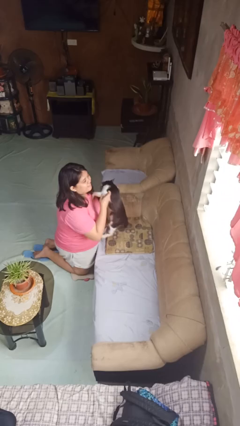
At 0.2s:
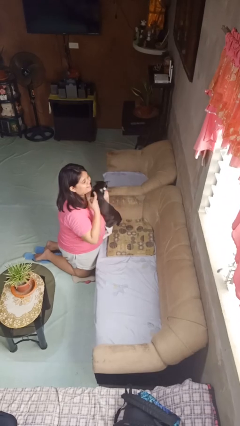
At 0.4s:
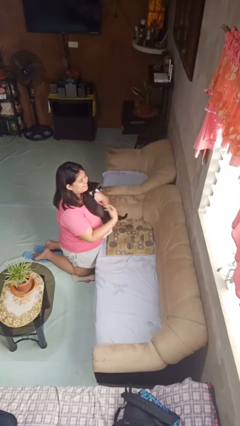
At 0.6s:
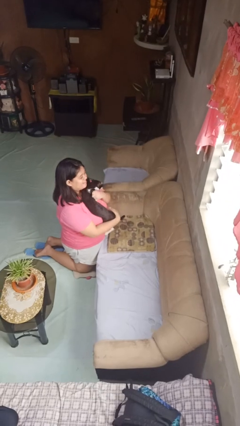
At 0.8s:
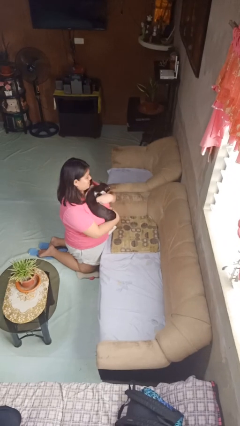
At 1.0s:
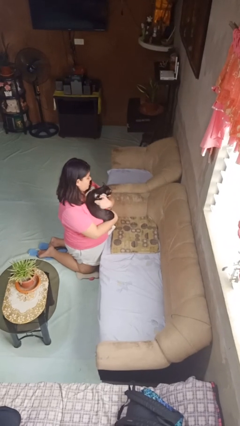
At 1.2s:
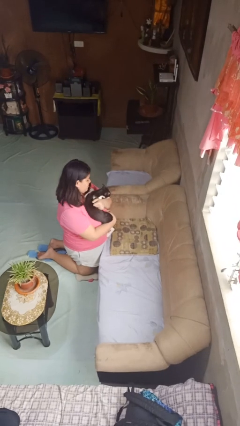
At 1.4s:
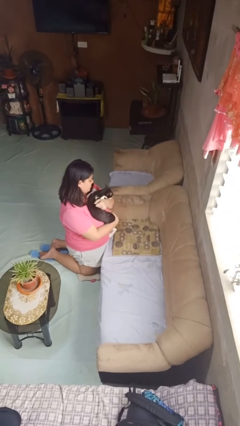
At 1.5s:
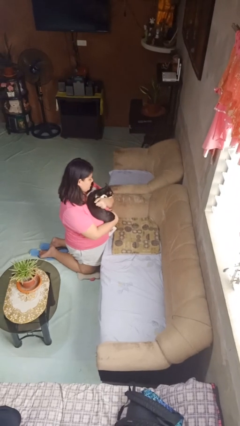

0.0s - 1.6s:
person hugs cat

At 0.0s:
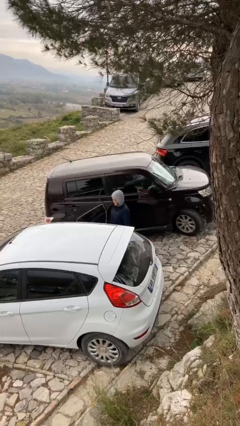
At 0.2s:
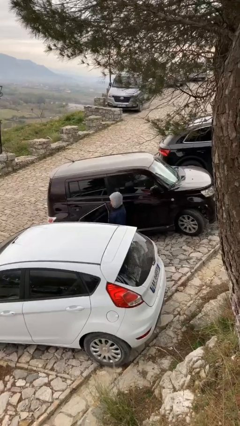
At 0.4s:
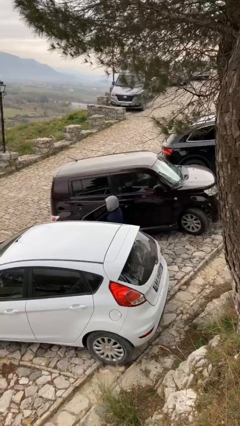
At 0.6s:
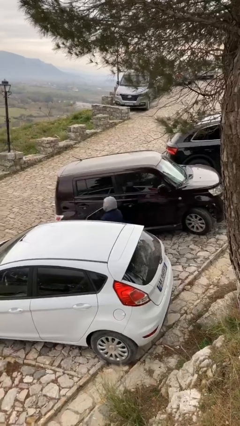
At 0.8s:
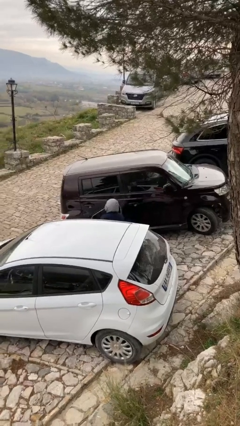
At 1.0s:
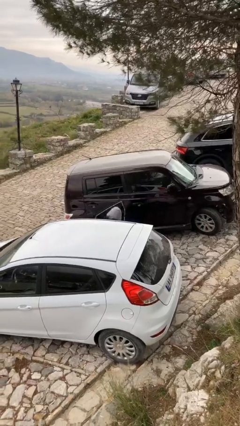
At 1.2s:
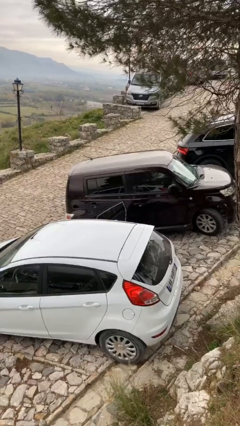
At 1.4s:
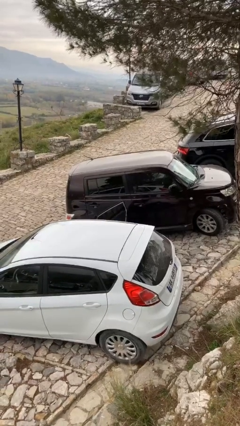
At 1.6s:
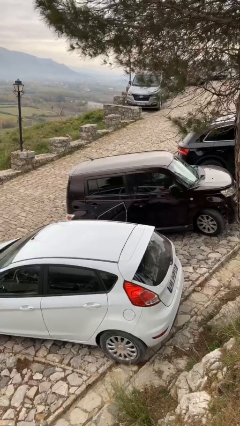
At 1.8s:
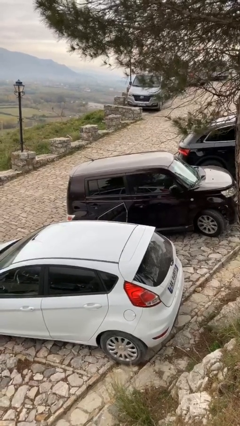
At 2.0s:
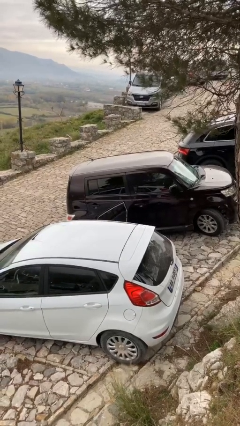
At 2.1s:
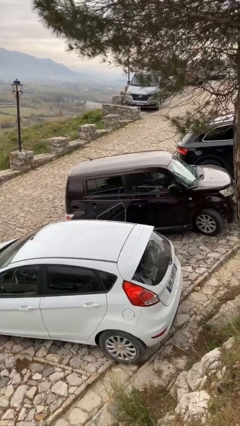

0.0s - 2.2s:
person enters car

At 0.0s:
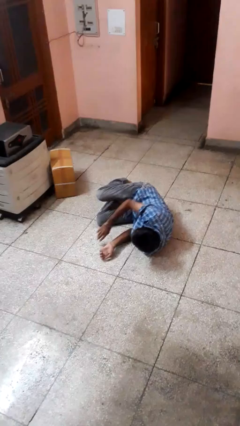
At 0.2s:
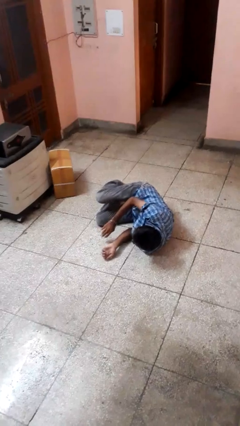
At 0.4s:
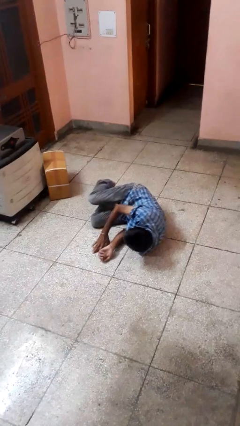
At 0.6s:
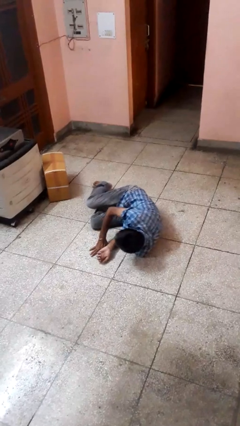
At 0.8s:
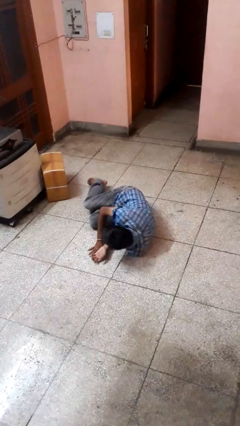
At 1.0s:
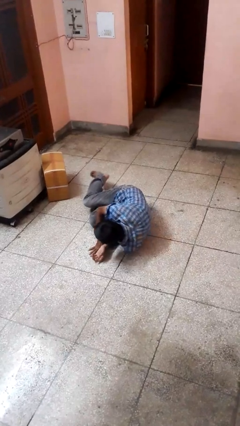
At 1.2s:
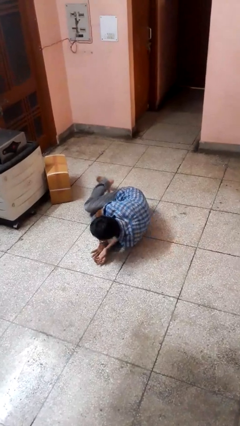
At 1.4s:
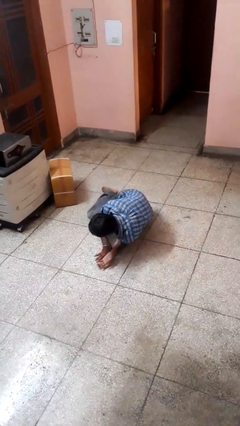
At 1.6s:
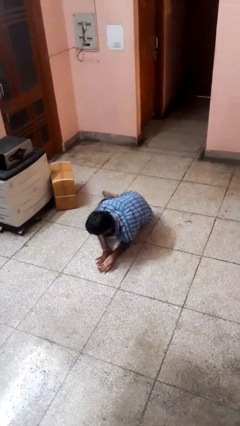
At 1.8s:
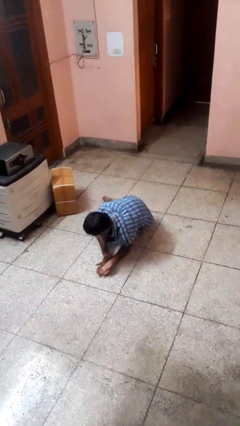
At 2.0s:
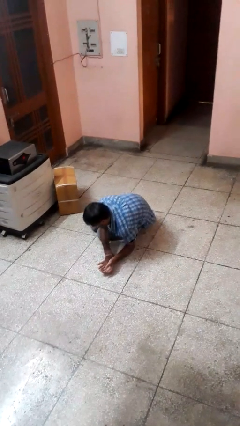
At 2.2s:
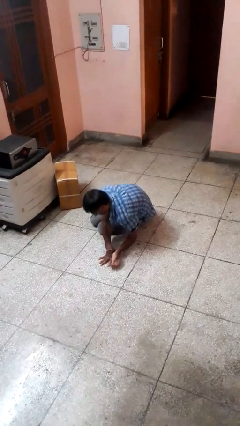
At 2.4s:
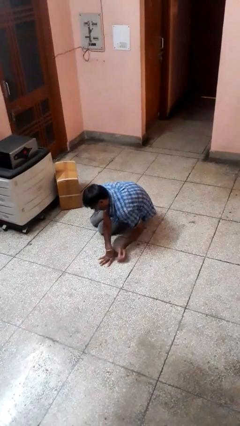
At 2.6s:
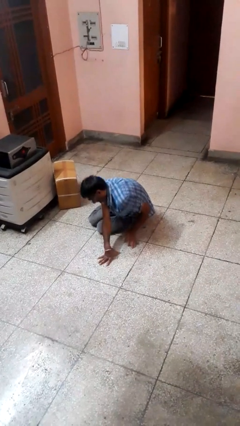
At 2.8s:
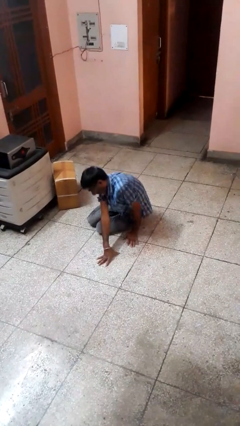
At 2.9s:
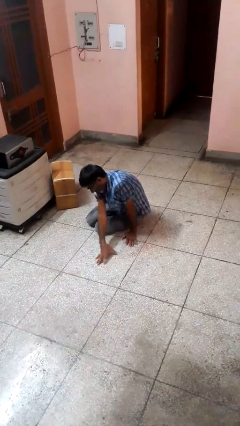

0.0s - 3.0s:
person lies down on floor

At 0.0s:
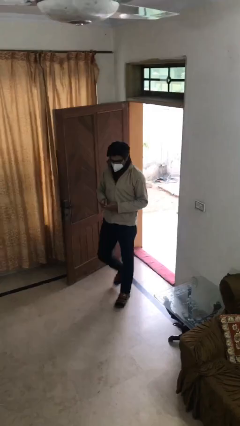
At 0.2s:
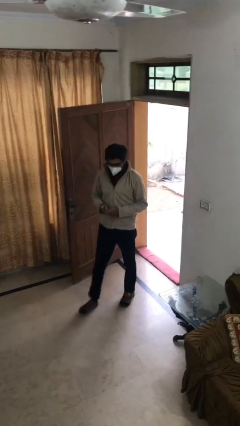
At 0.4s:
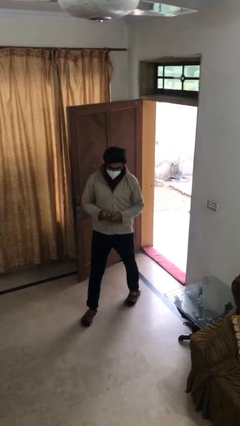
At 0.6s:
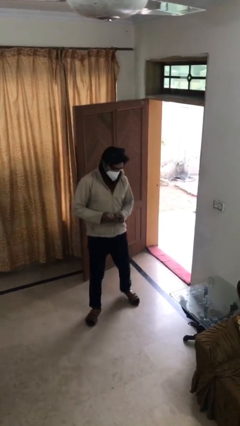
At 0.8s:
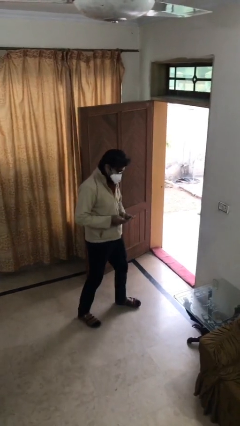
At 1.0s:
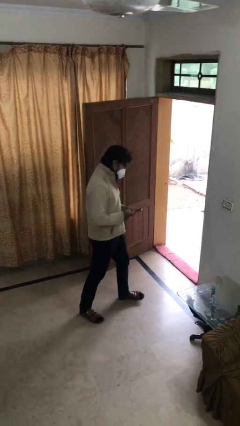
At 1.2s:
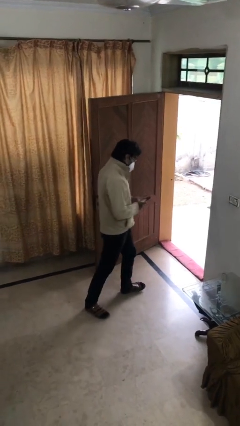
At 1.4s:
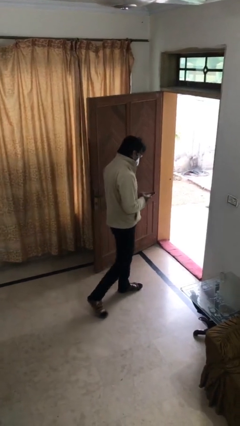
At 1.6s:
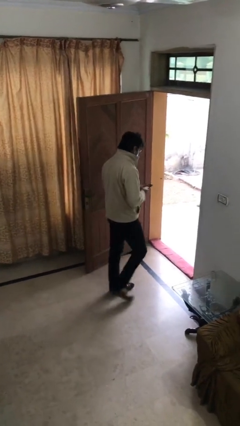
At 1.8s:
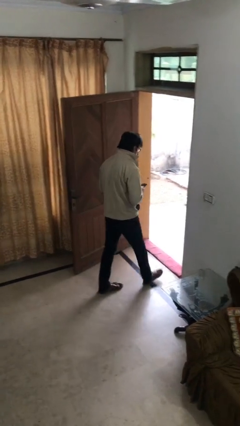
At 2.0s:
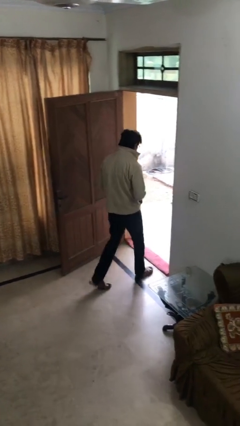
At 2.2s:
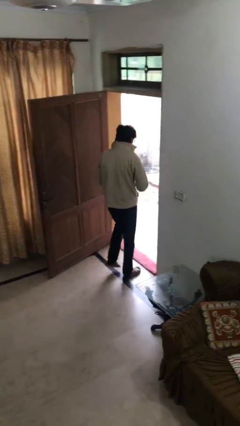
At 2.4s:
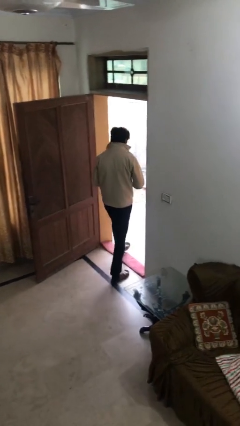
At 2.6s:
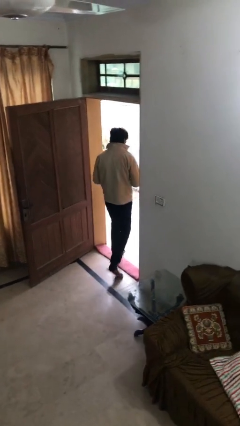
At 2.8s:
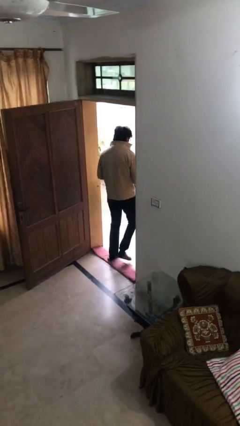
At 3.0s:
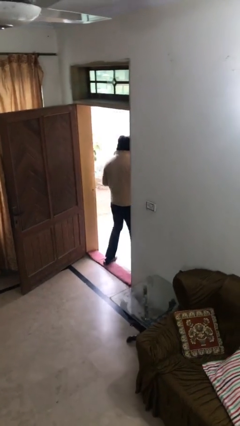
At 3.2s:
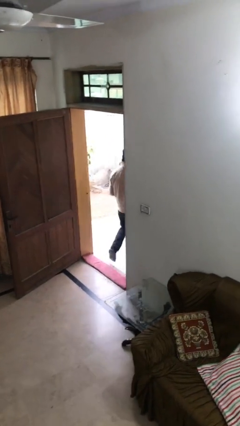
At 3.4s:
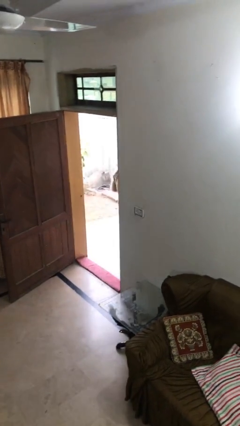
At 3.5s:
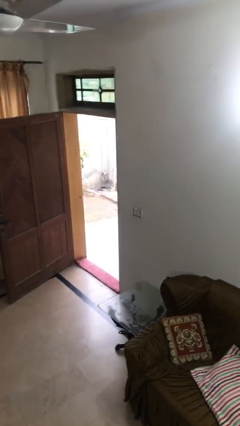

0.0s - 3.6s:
person exits scene through structure

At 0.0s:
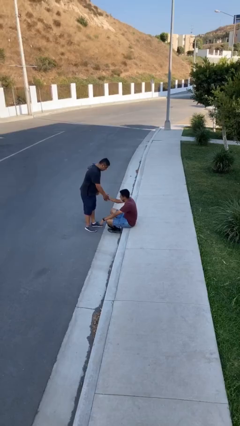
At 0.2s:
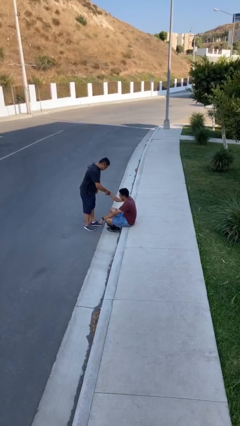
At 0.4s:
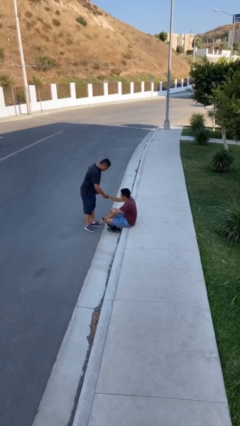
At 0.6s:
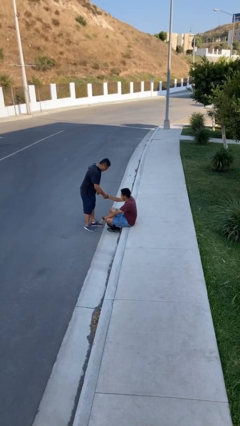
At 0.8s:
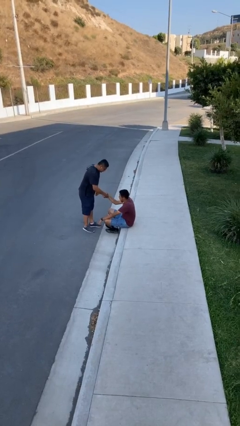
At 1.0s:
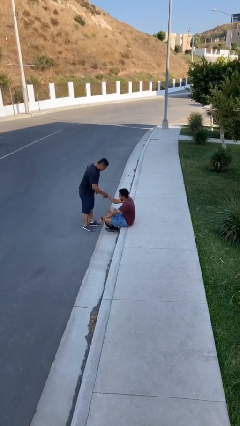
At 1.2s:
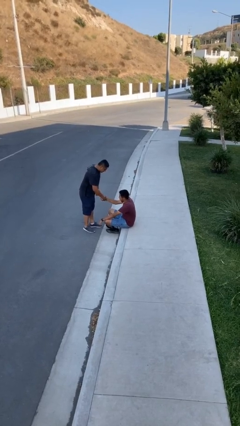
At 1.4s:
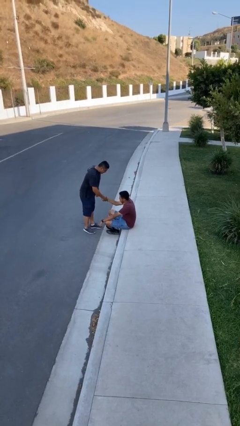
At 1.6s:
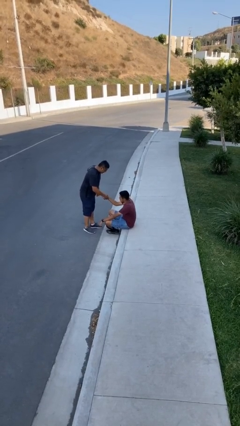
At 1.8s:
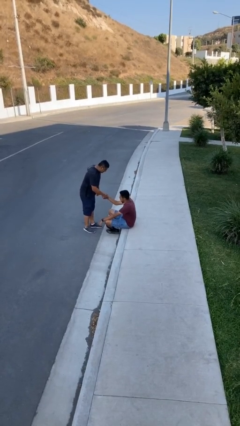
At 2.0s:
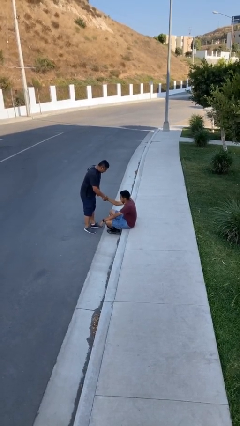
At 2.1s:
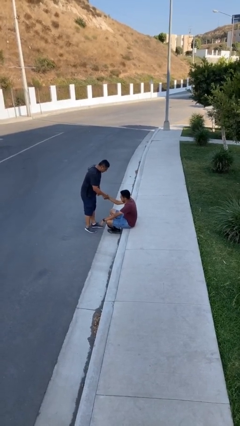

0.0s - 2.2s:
person shakes hand

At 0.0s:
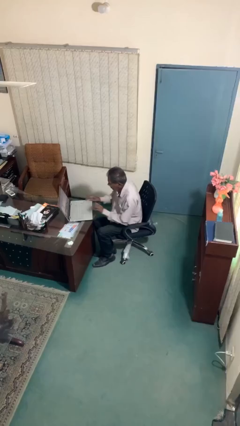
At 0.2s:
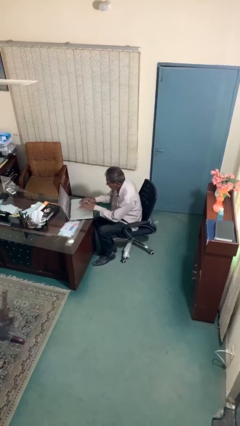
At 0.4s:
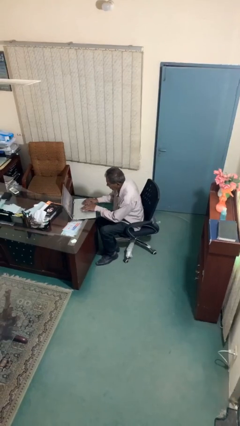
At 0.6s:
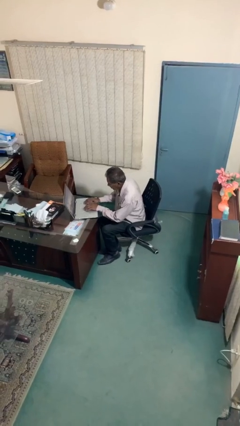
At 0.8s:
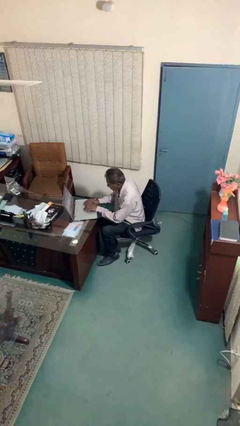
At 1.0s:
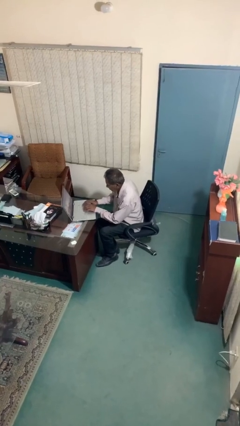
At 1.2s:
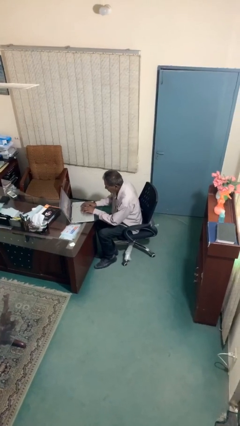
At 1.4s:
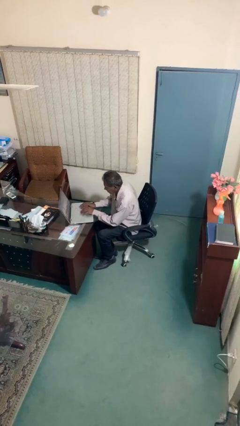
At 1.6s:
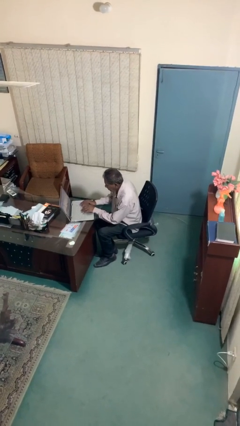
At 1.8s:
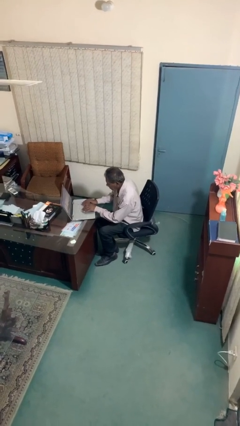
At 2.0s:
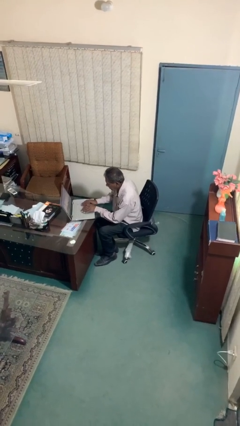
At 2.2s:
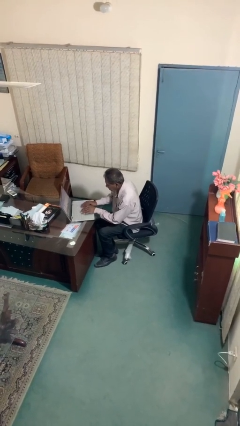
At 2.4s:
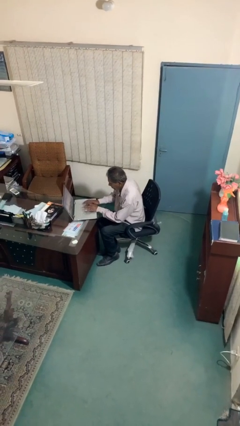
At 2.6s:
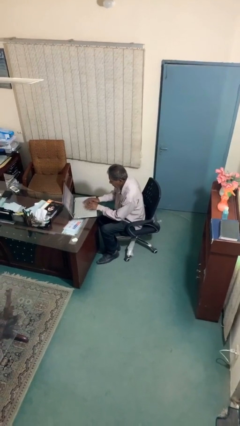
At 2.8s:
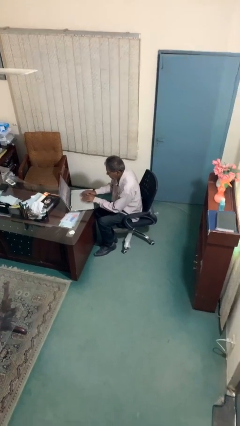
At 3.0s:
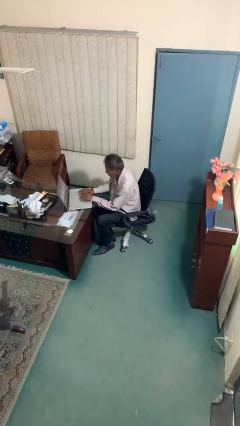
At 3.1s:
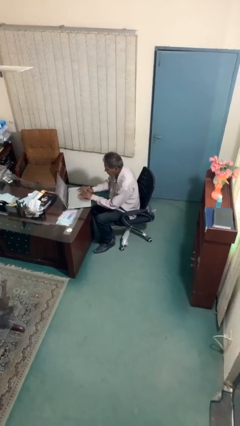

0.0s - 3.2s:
person interacts with laptop

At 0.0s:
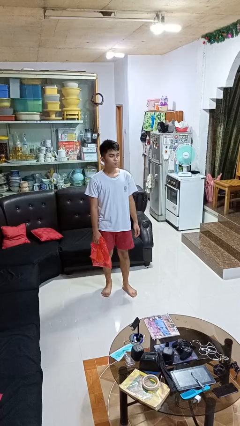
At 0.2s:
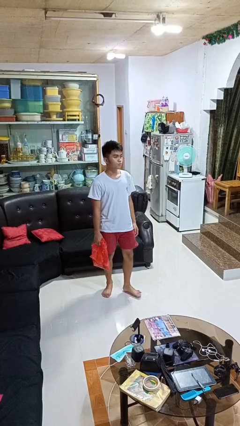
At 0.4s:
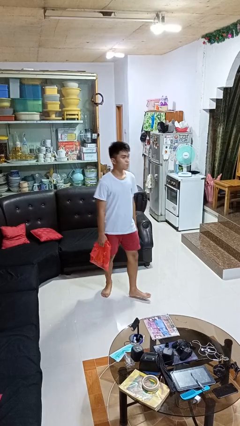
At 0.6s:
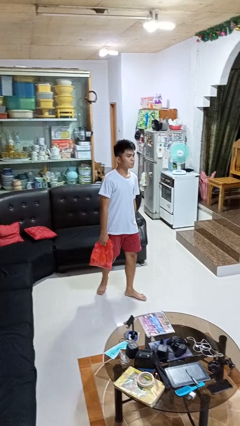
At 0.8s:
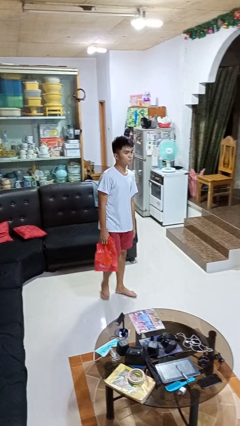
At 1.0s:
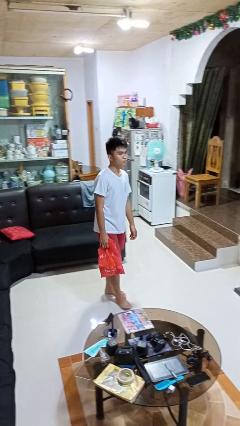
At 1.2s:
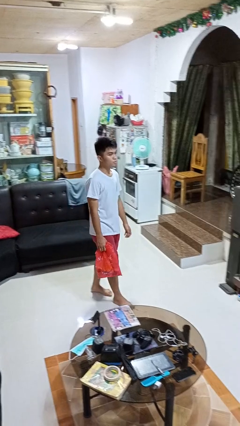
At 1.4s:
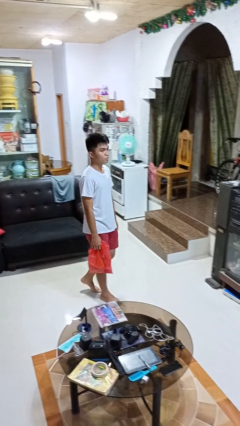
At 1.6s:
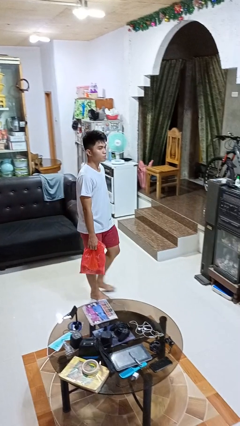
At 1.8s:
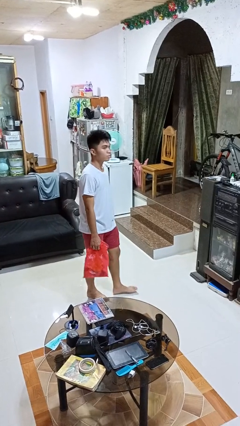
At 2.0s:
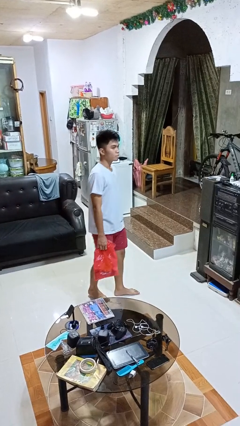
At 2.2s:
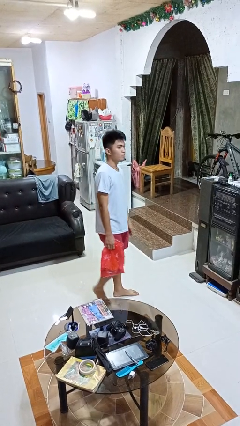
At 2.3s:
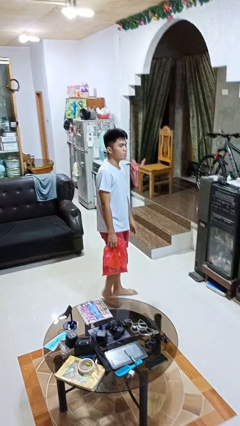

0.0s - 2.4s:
person carries groceries
